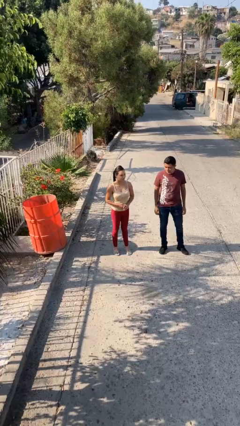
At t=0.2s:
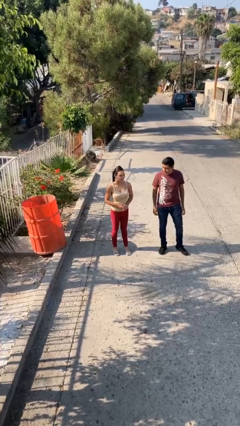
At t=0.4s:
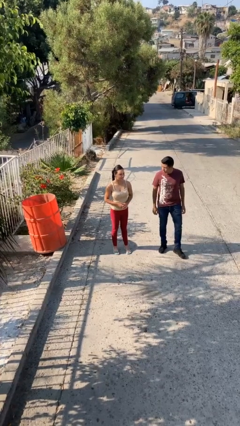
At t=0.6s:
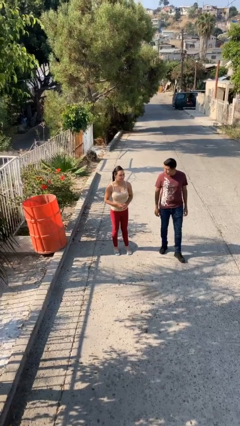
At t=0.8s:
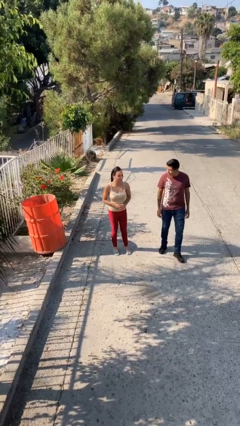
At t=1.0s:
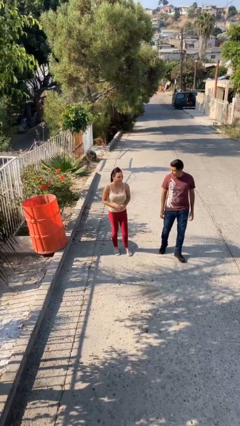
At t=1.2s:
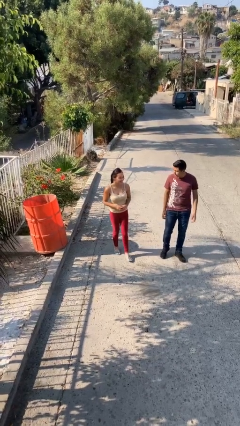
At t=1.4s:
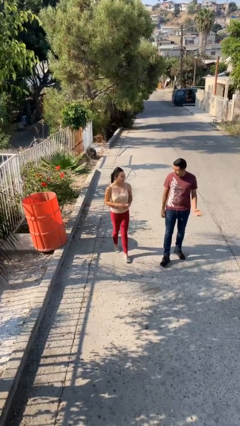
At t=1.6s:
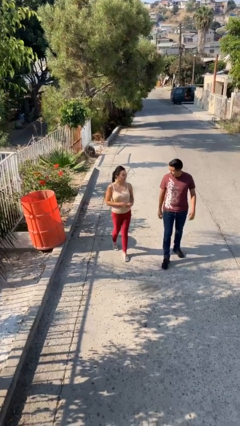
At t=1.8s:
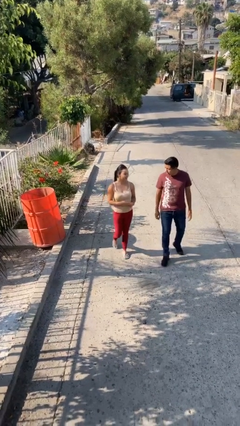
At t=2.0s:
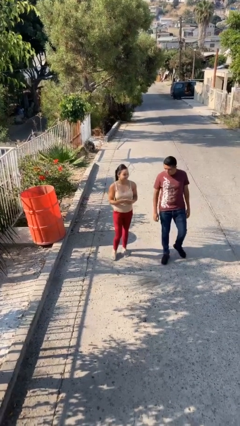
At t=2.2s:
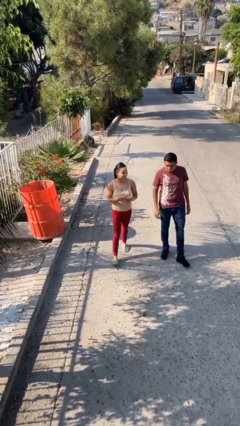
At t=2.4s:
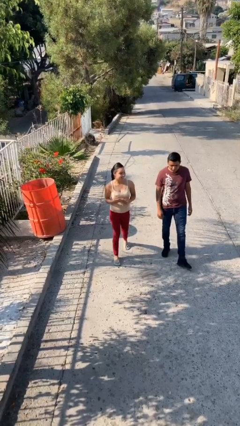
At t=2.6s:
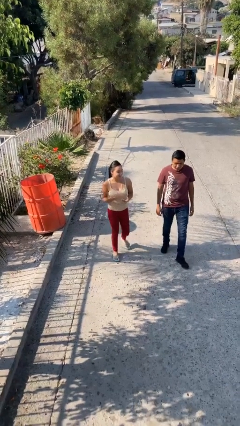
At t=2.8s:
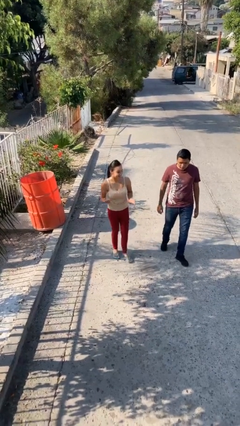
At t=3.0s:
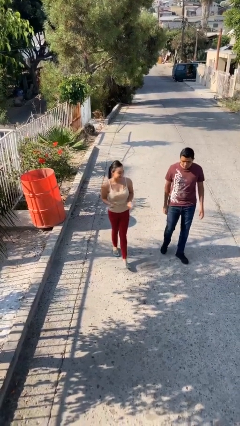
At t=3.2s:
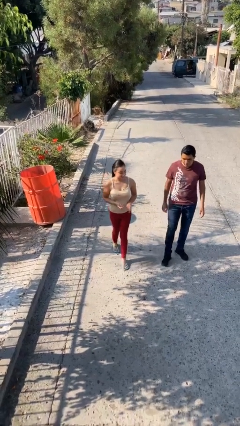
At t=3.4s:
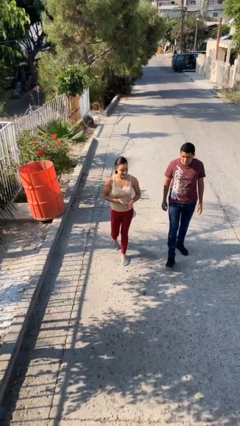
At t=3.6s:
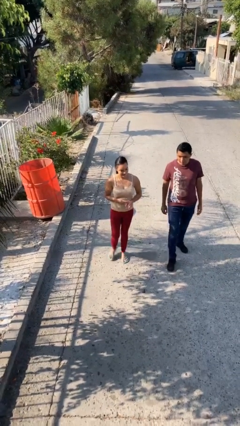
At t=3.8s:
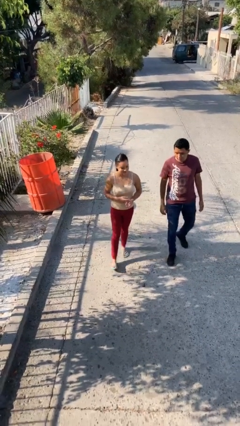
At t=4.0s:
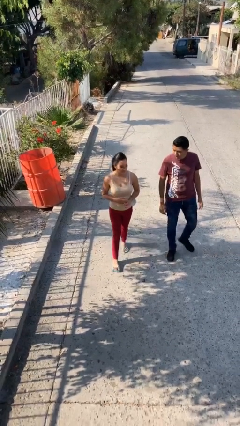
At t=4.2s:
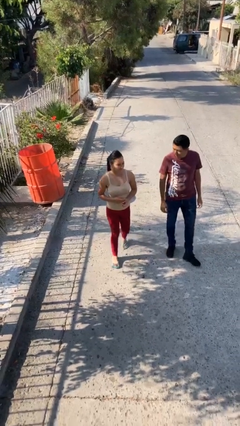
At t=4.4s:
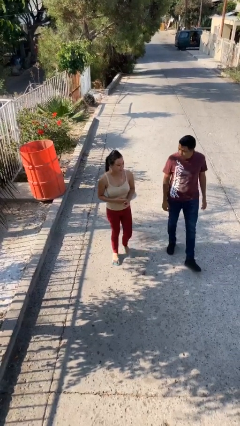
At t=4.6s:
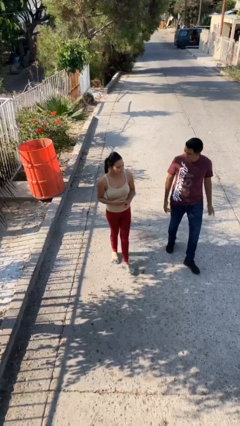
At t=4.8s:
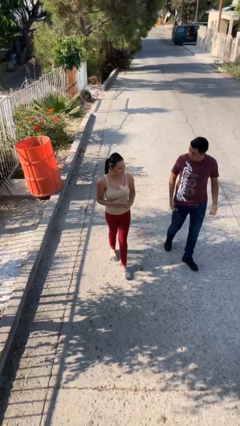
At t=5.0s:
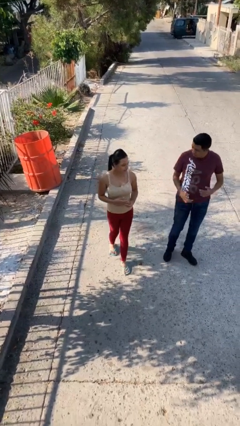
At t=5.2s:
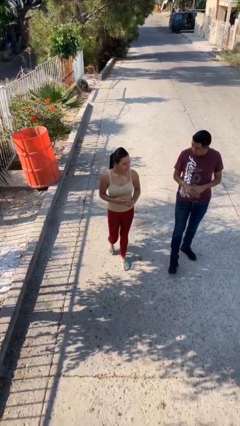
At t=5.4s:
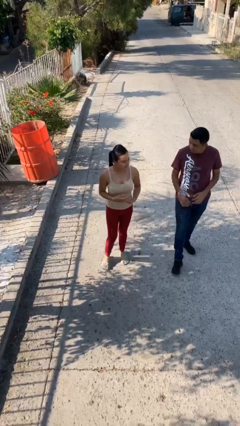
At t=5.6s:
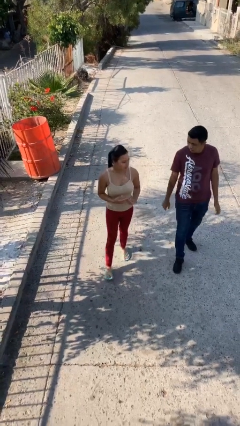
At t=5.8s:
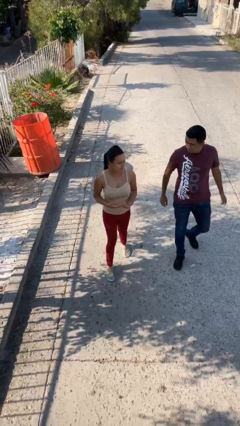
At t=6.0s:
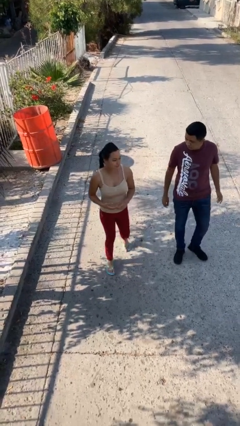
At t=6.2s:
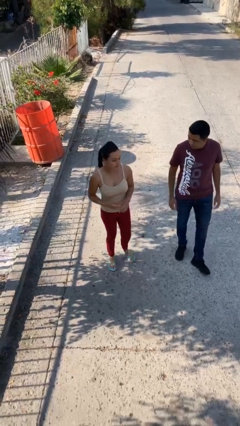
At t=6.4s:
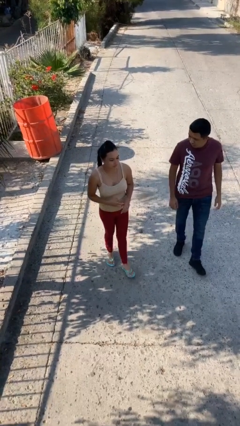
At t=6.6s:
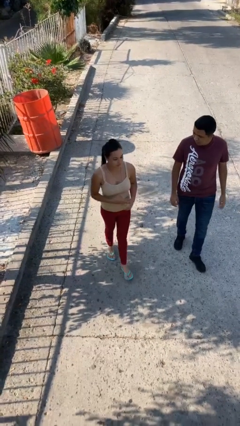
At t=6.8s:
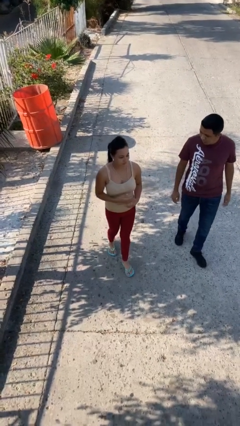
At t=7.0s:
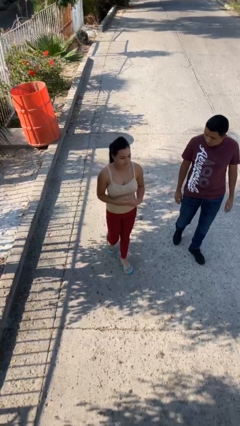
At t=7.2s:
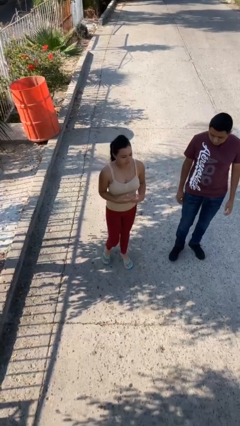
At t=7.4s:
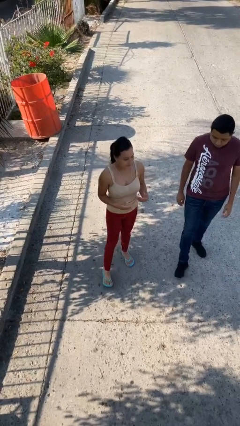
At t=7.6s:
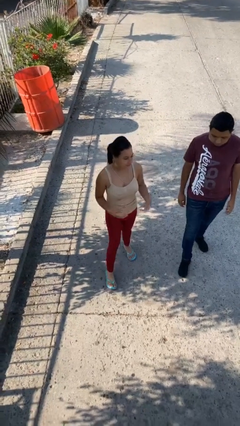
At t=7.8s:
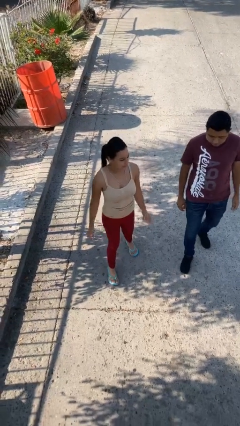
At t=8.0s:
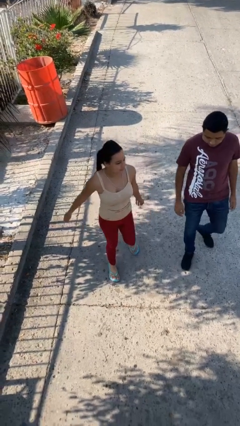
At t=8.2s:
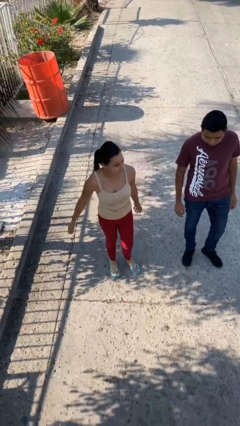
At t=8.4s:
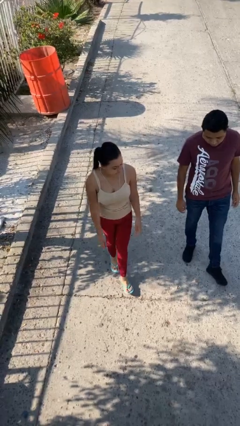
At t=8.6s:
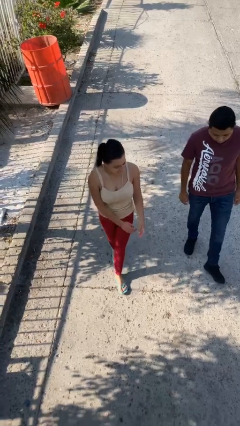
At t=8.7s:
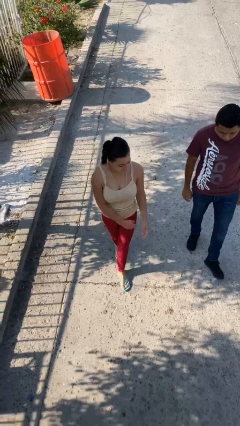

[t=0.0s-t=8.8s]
person talks to person

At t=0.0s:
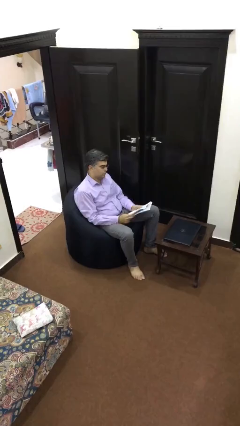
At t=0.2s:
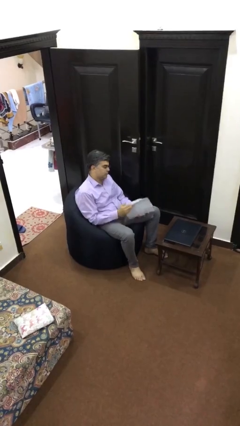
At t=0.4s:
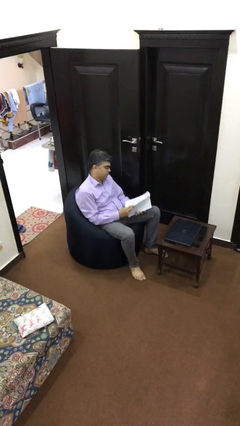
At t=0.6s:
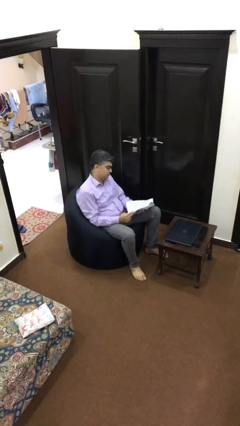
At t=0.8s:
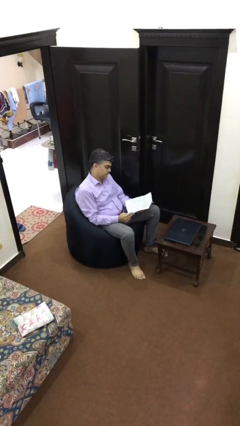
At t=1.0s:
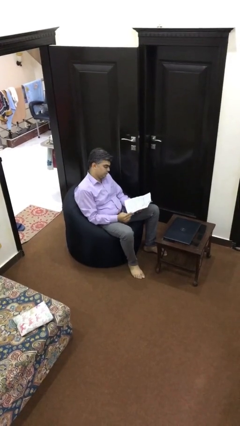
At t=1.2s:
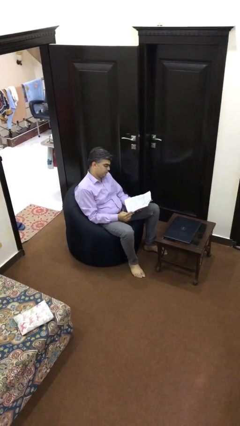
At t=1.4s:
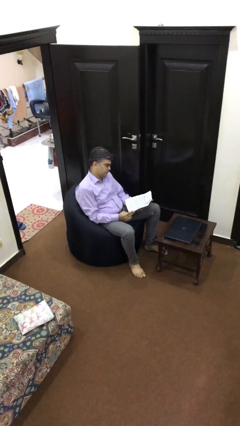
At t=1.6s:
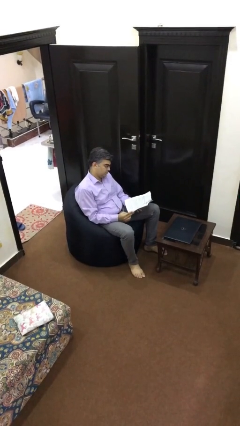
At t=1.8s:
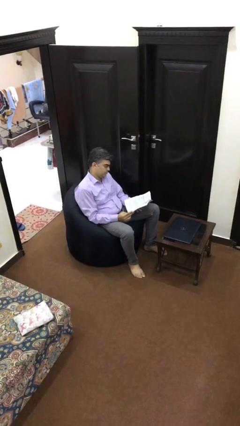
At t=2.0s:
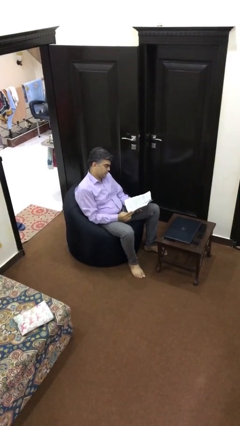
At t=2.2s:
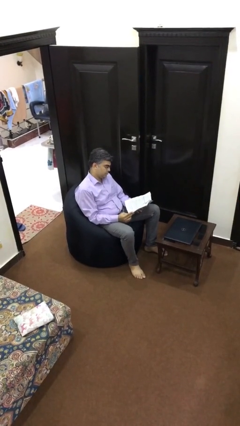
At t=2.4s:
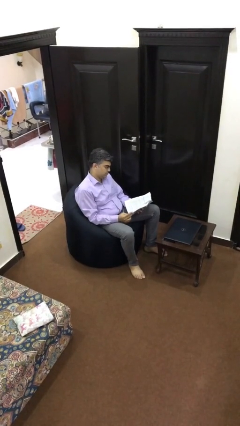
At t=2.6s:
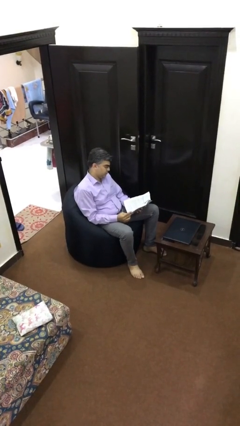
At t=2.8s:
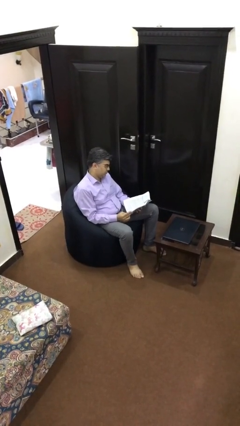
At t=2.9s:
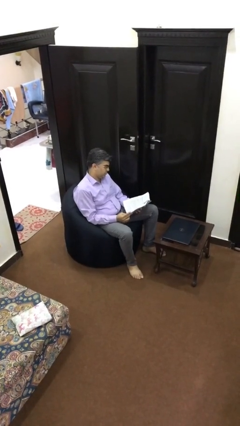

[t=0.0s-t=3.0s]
person reads document

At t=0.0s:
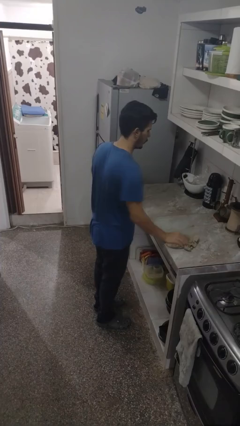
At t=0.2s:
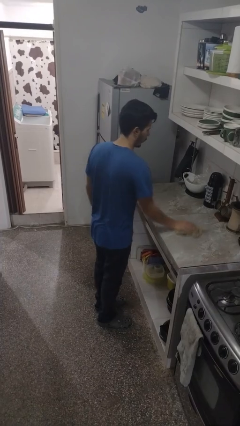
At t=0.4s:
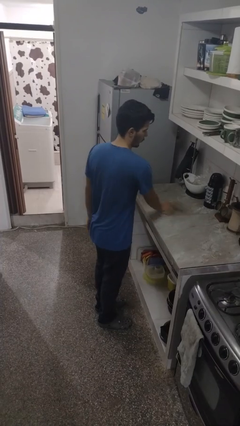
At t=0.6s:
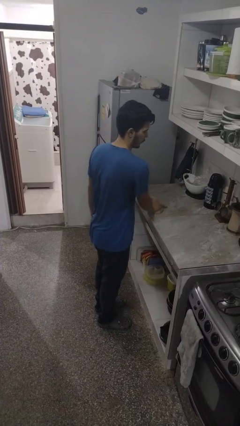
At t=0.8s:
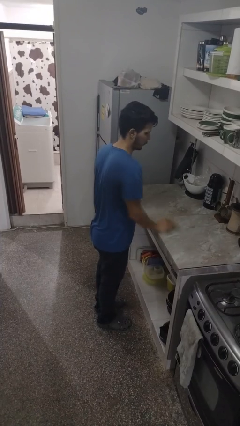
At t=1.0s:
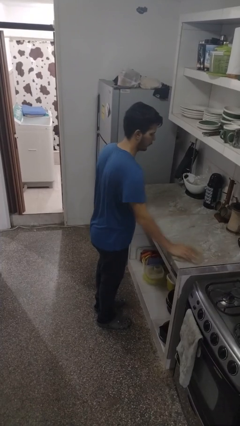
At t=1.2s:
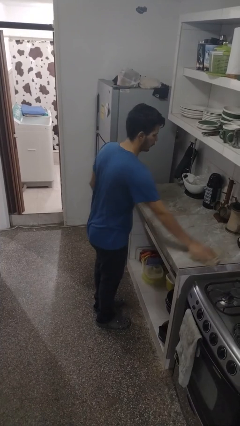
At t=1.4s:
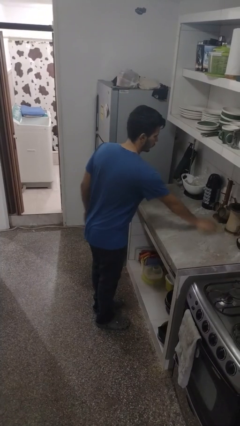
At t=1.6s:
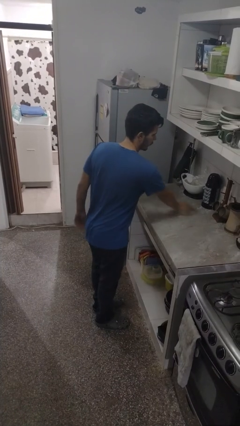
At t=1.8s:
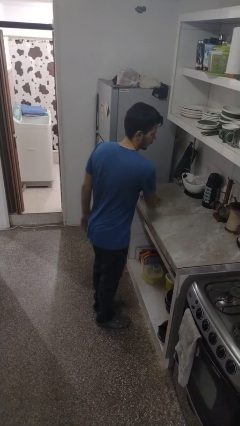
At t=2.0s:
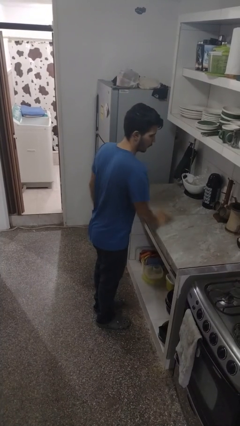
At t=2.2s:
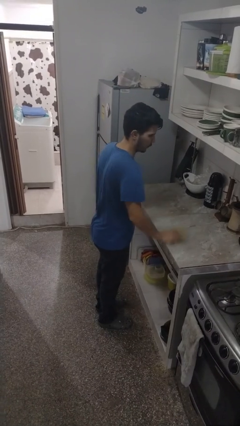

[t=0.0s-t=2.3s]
person cleans table with rag

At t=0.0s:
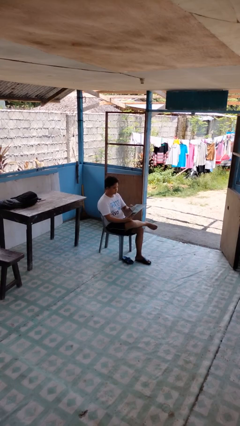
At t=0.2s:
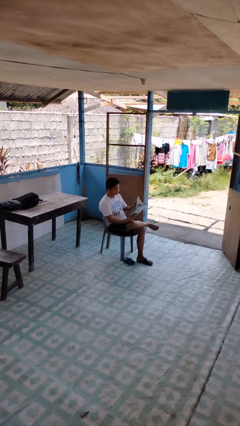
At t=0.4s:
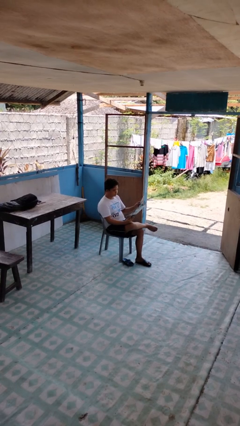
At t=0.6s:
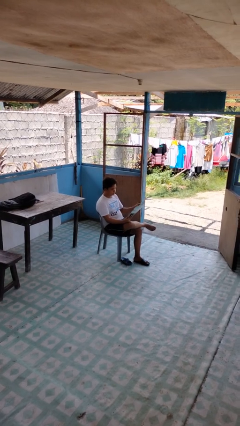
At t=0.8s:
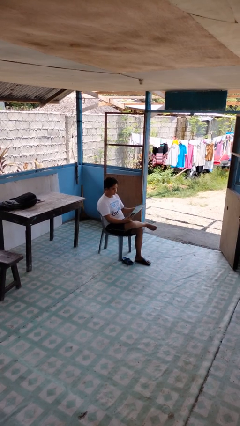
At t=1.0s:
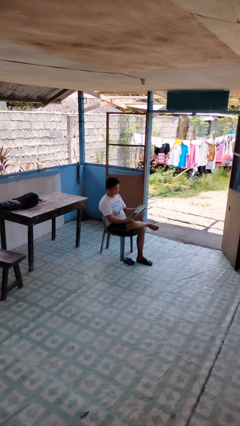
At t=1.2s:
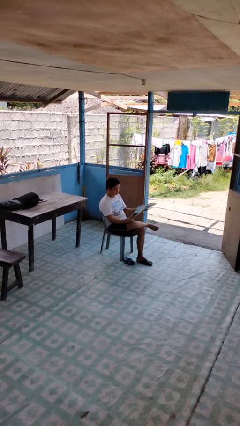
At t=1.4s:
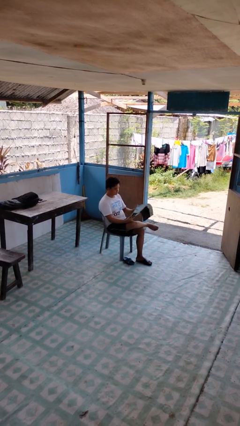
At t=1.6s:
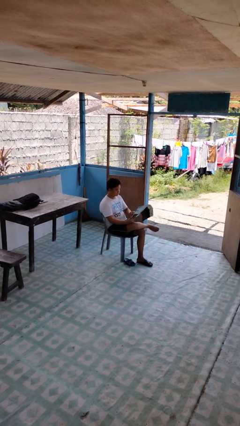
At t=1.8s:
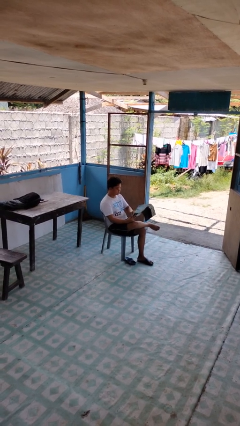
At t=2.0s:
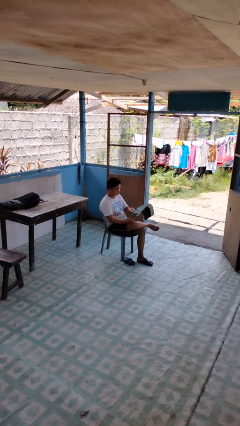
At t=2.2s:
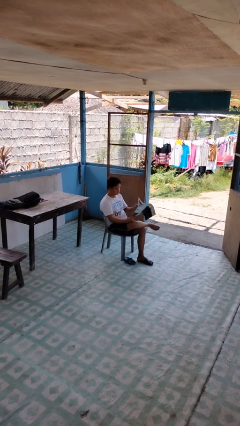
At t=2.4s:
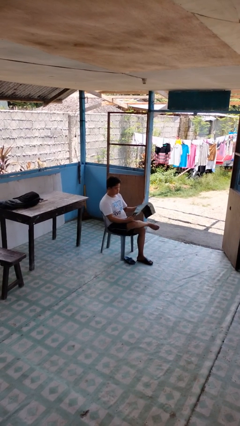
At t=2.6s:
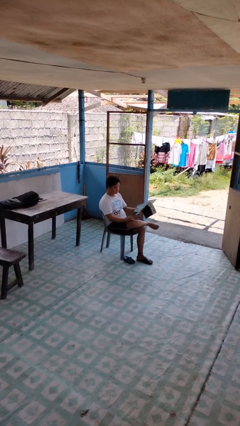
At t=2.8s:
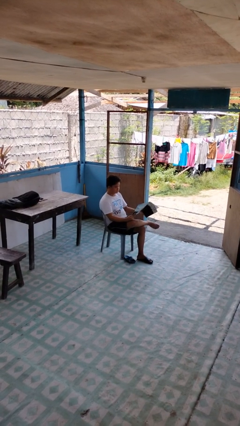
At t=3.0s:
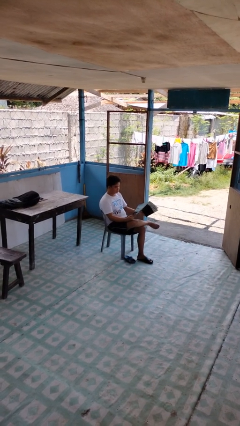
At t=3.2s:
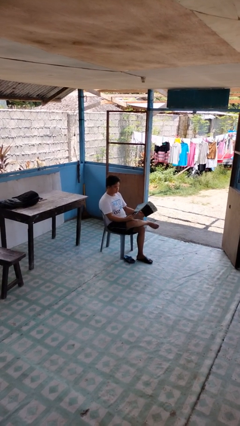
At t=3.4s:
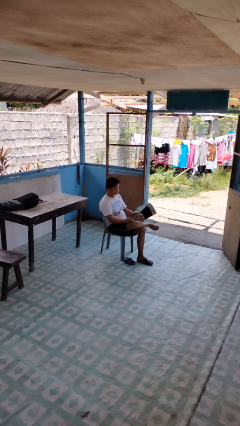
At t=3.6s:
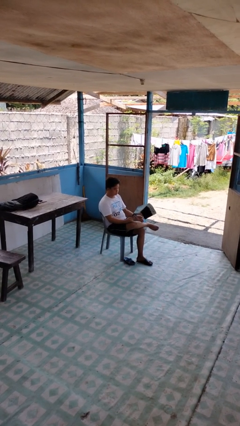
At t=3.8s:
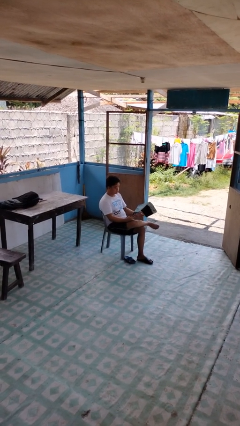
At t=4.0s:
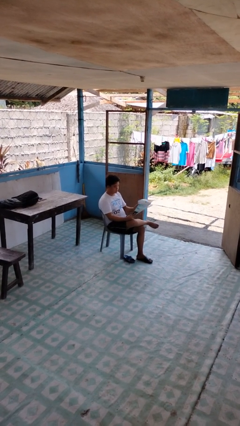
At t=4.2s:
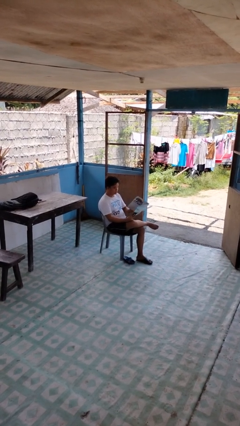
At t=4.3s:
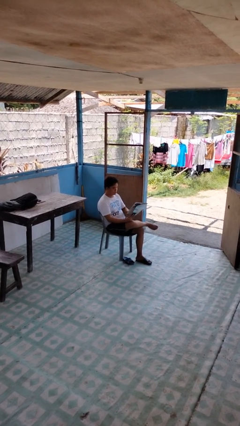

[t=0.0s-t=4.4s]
person reads magazine
